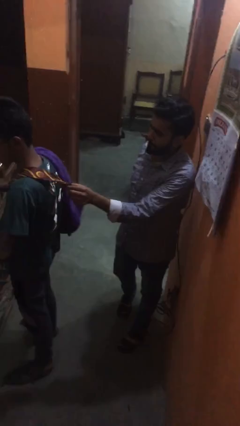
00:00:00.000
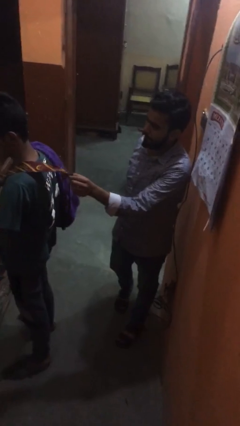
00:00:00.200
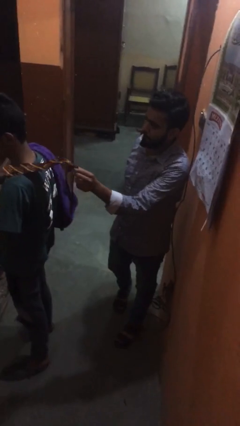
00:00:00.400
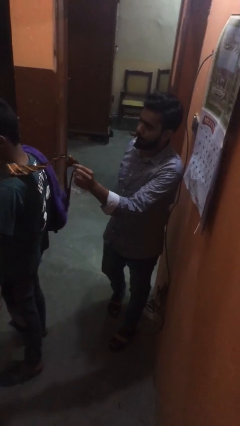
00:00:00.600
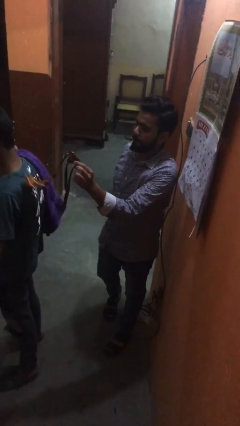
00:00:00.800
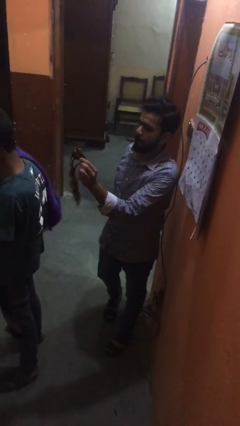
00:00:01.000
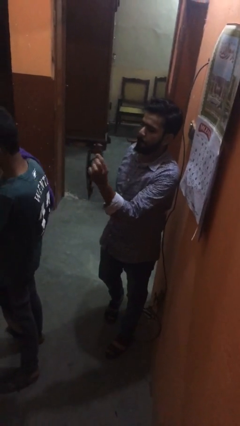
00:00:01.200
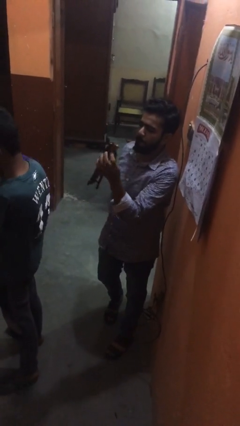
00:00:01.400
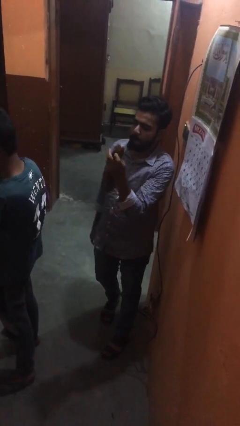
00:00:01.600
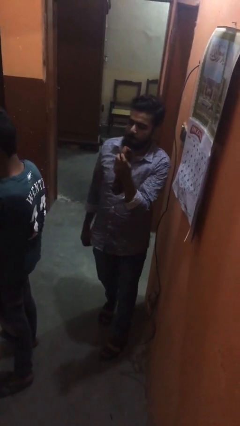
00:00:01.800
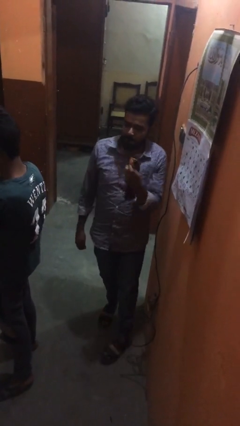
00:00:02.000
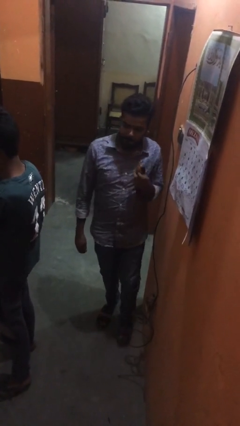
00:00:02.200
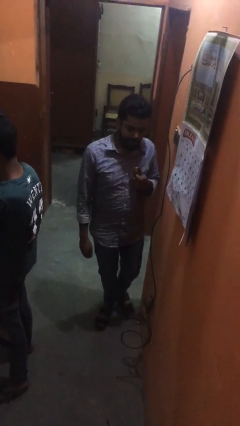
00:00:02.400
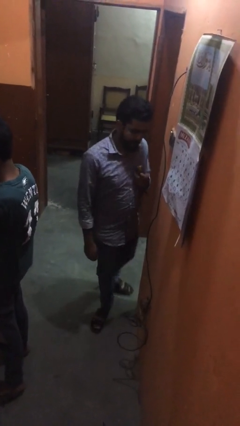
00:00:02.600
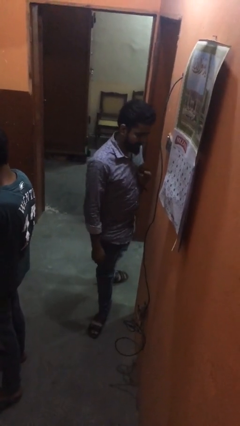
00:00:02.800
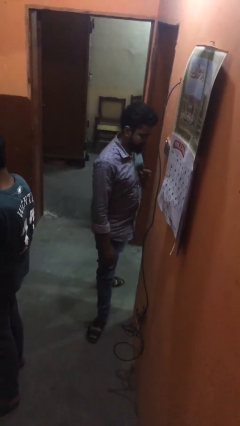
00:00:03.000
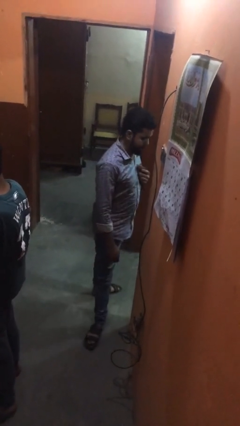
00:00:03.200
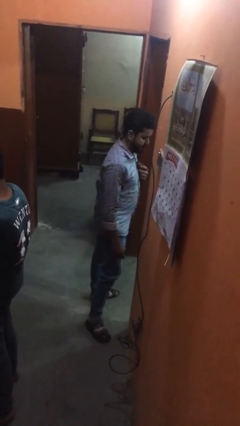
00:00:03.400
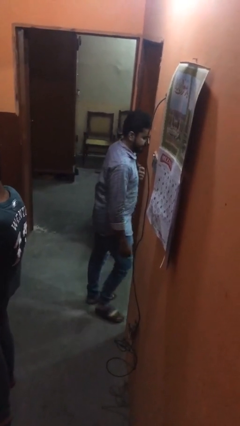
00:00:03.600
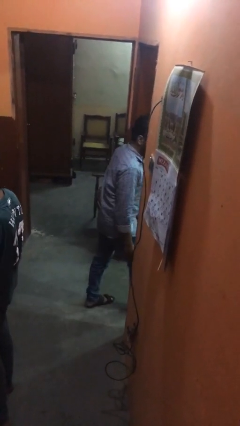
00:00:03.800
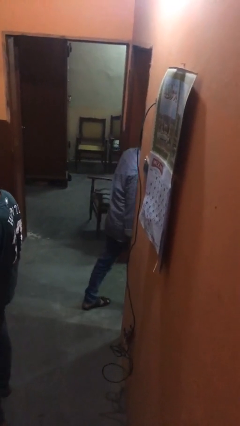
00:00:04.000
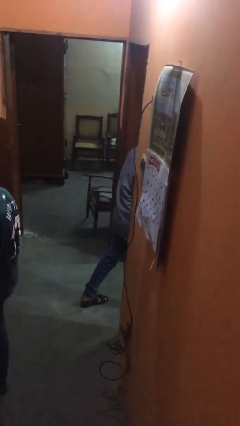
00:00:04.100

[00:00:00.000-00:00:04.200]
person steals object from person

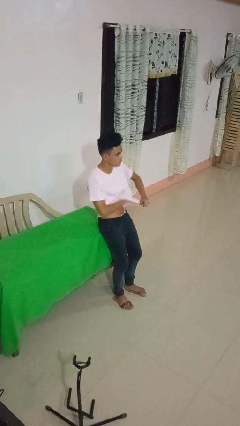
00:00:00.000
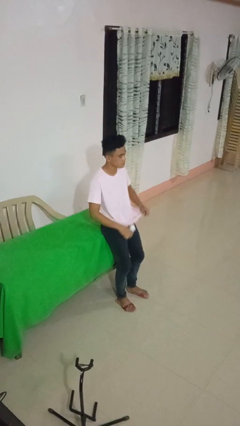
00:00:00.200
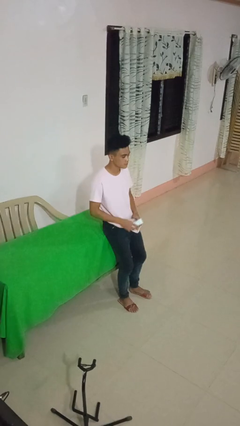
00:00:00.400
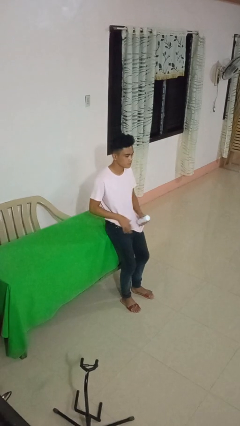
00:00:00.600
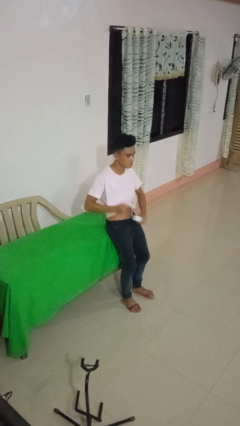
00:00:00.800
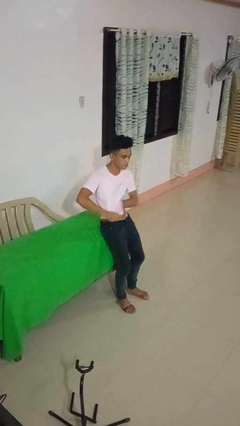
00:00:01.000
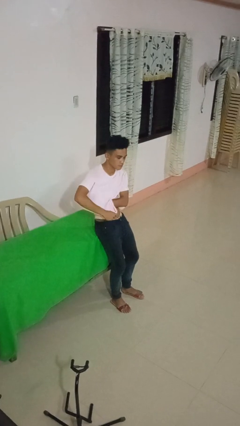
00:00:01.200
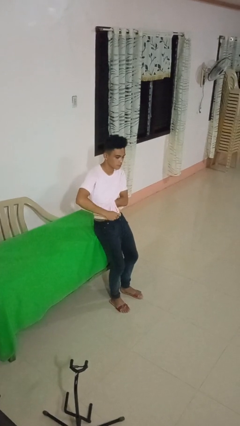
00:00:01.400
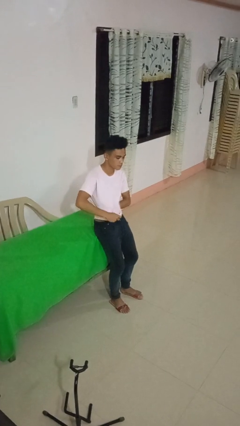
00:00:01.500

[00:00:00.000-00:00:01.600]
person applies deodorant

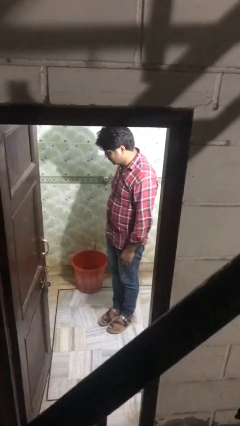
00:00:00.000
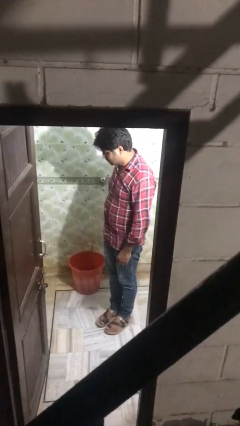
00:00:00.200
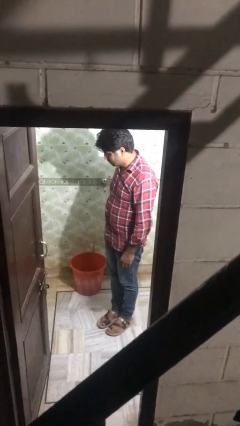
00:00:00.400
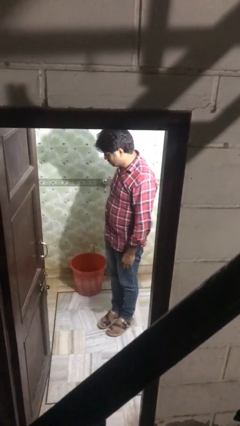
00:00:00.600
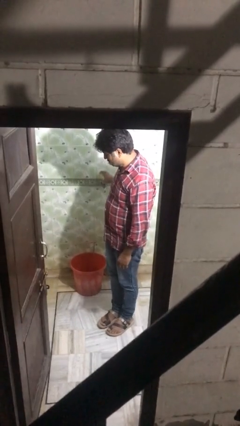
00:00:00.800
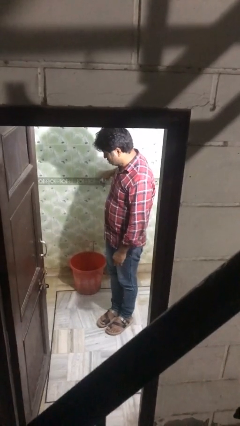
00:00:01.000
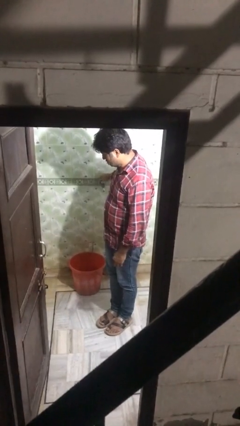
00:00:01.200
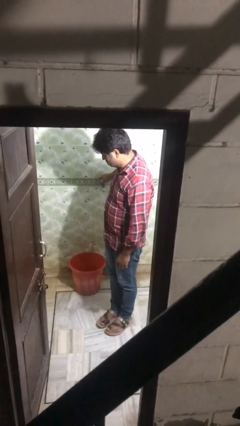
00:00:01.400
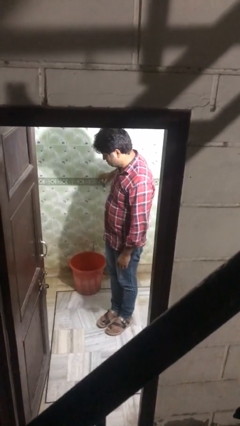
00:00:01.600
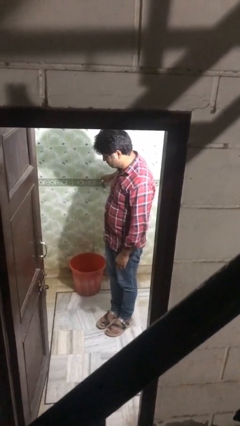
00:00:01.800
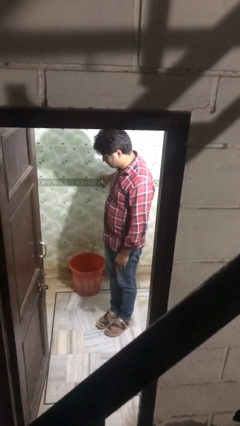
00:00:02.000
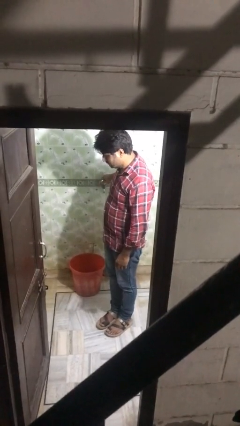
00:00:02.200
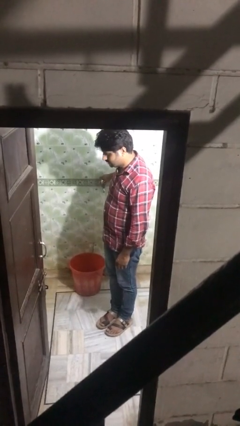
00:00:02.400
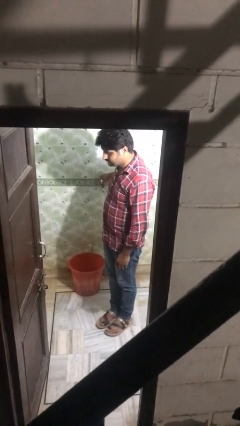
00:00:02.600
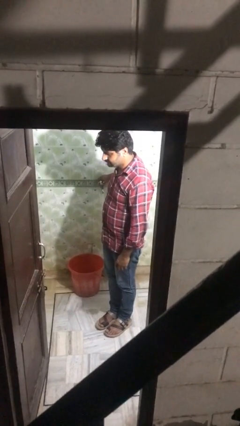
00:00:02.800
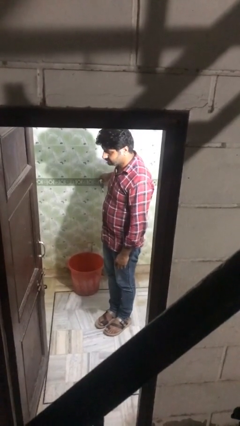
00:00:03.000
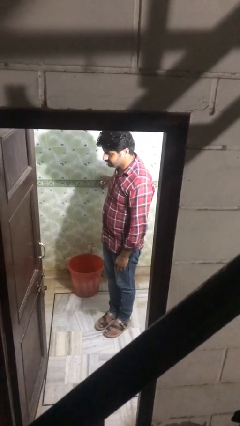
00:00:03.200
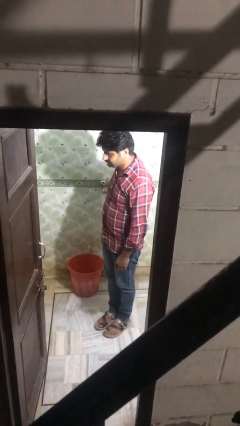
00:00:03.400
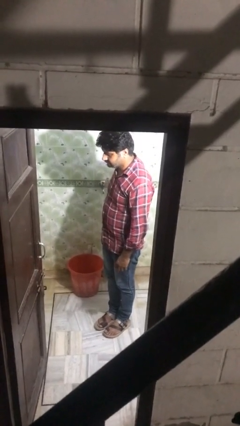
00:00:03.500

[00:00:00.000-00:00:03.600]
person turns on faucet

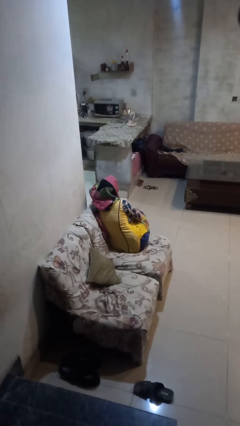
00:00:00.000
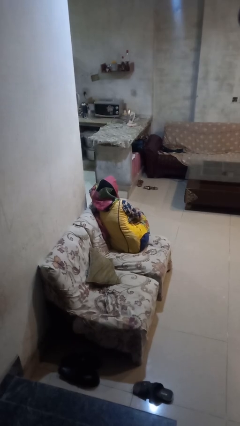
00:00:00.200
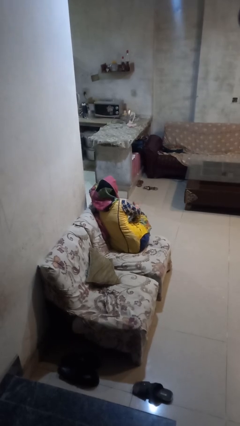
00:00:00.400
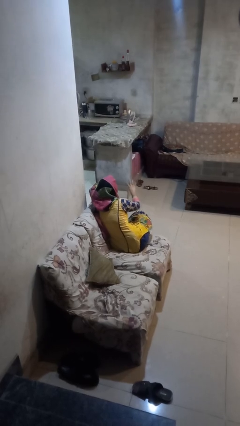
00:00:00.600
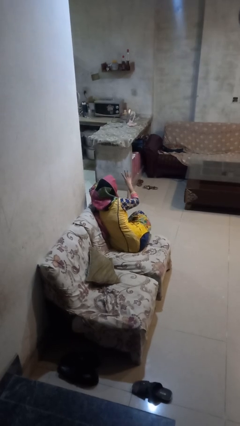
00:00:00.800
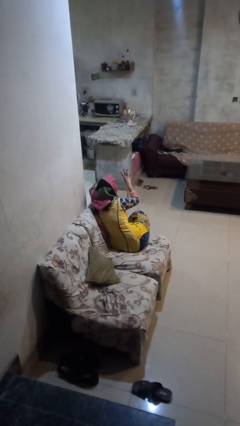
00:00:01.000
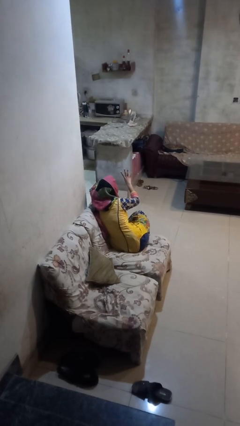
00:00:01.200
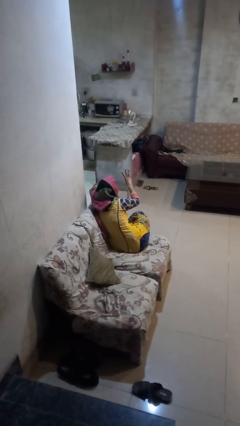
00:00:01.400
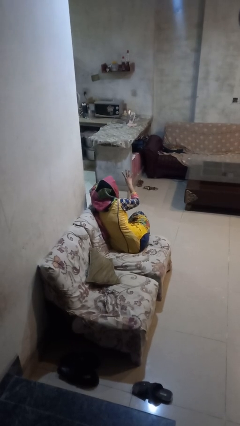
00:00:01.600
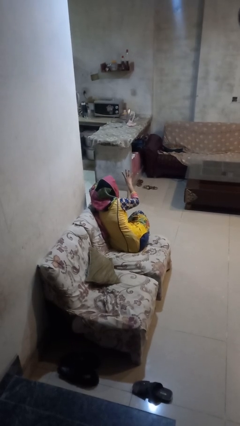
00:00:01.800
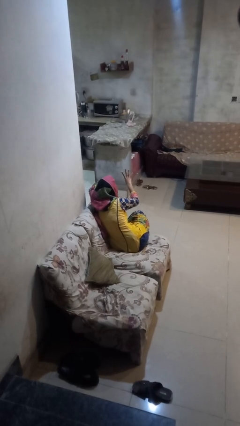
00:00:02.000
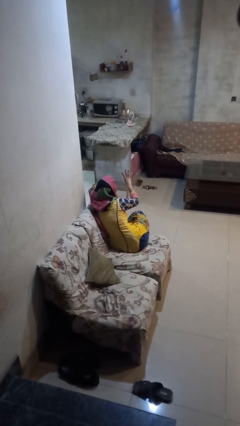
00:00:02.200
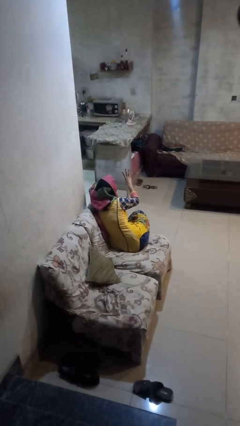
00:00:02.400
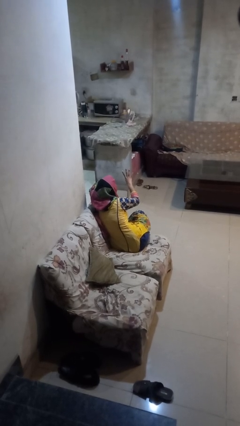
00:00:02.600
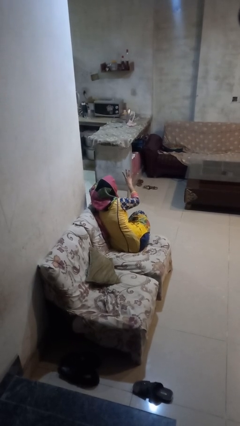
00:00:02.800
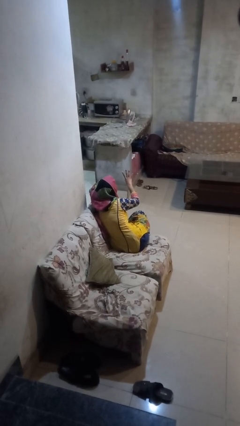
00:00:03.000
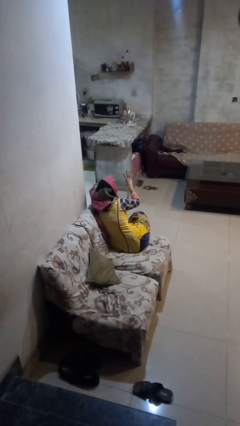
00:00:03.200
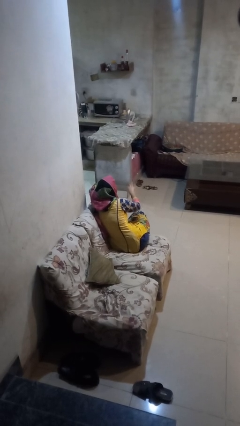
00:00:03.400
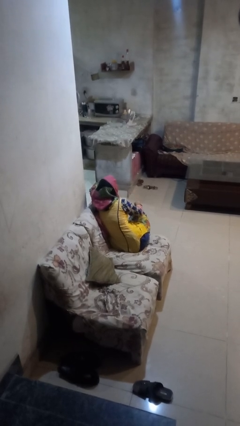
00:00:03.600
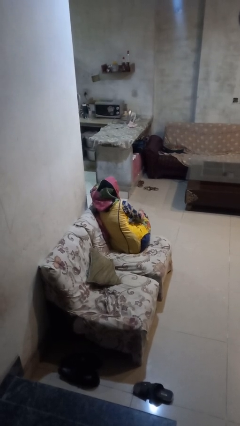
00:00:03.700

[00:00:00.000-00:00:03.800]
person gestures number four

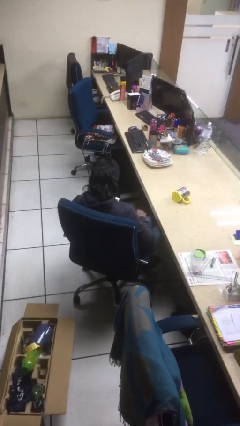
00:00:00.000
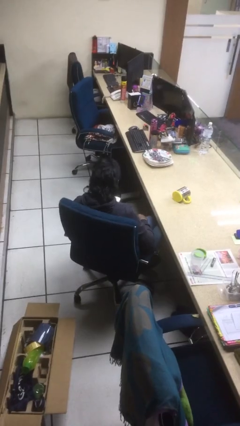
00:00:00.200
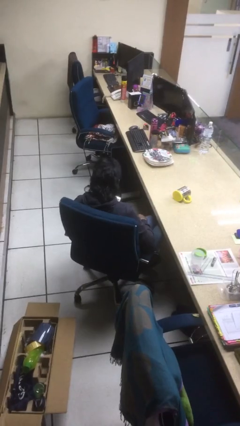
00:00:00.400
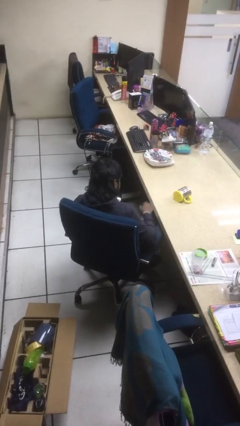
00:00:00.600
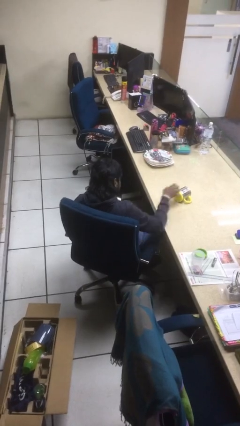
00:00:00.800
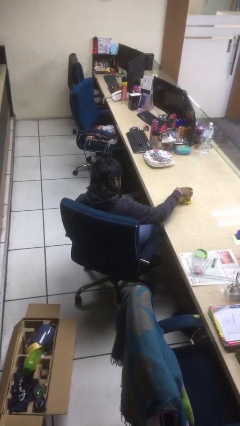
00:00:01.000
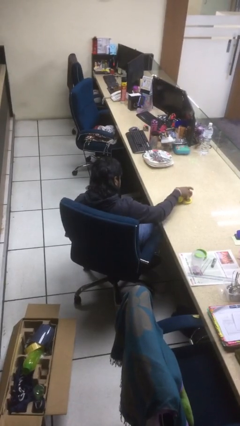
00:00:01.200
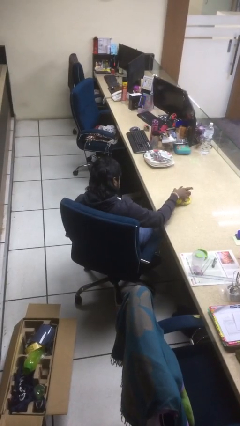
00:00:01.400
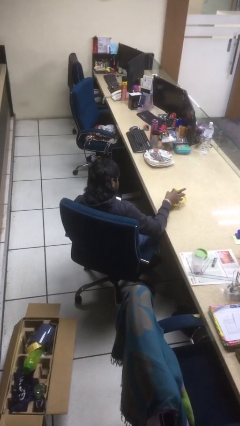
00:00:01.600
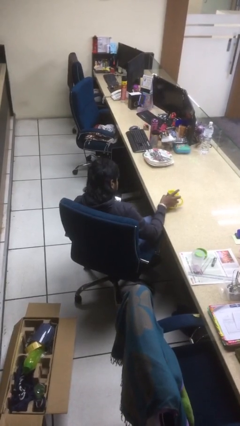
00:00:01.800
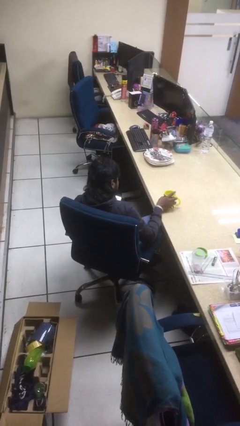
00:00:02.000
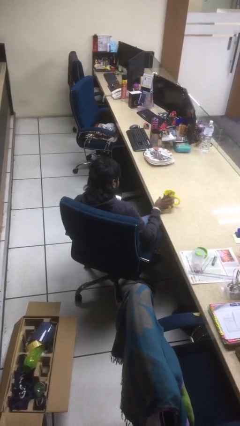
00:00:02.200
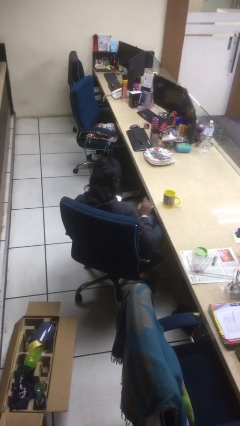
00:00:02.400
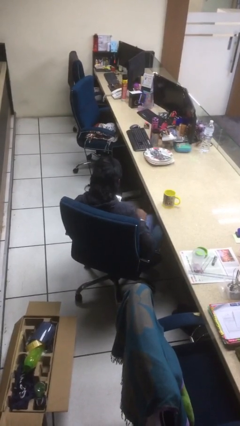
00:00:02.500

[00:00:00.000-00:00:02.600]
person sets upright glass

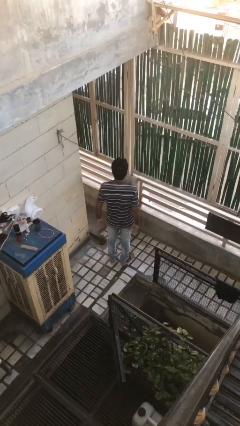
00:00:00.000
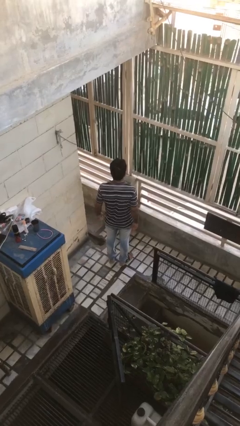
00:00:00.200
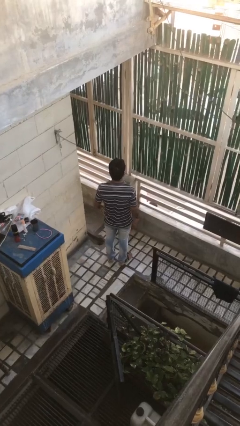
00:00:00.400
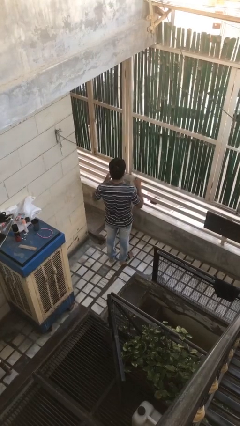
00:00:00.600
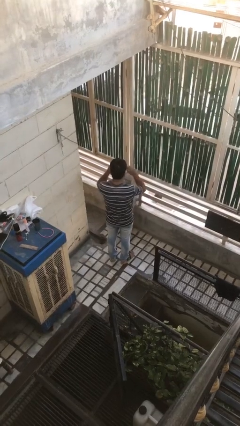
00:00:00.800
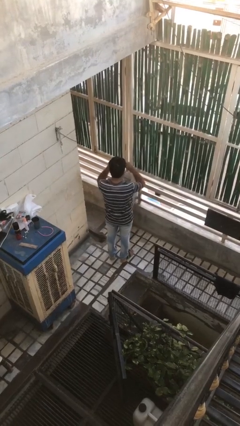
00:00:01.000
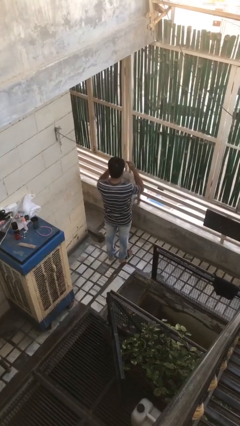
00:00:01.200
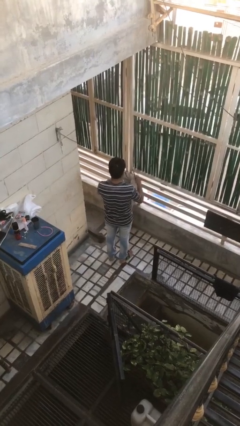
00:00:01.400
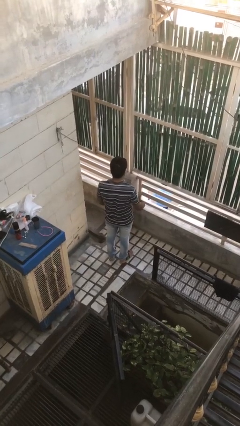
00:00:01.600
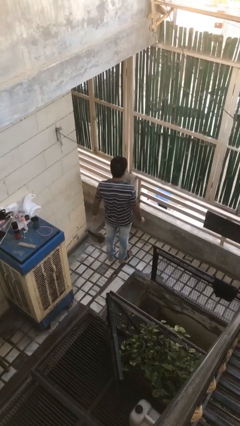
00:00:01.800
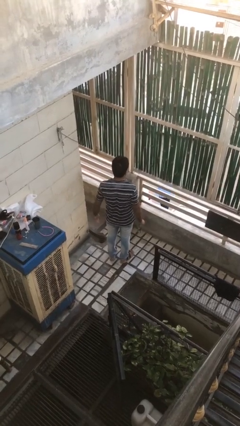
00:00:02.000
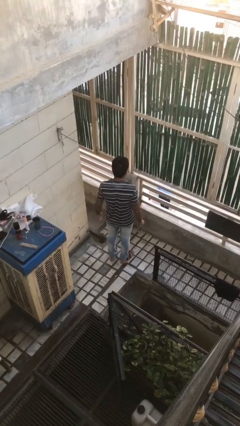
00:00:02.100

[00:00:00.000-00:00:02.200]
person takes off sunglasses
